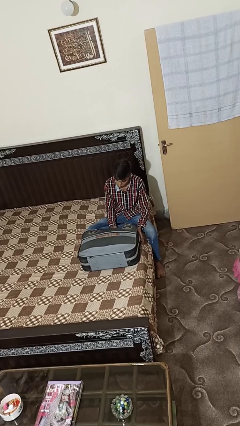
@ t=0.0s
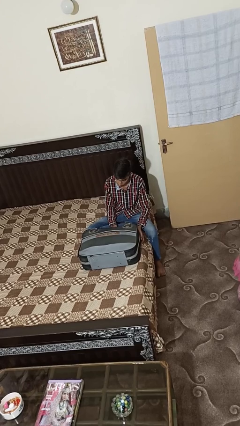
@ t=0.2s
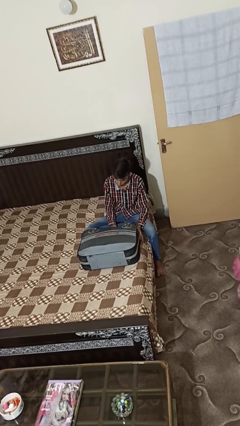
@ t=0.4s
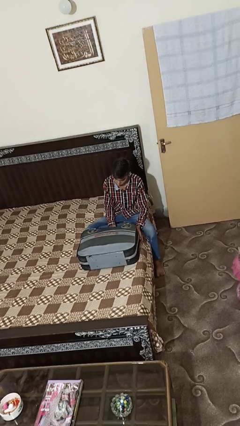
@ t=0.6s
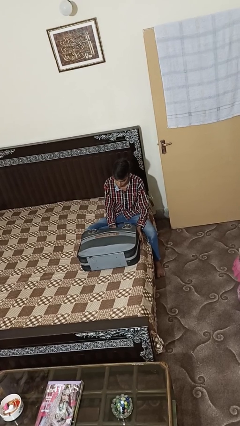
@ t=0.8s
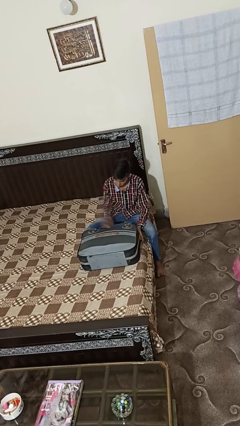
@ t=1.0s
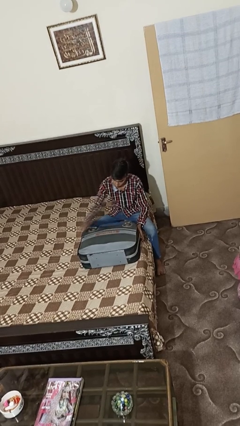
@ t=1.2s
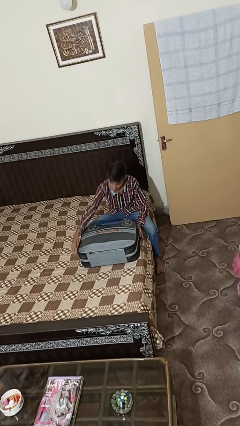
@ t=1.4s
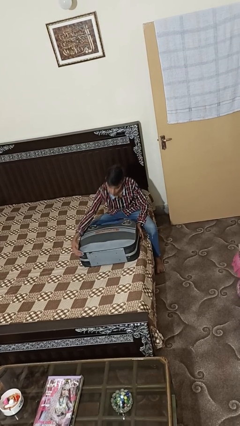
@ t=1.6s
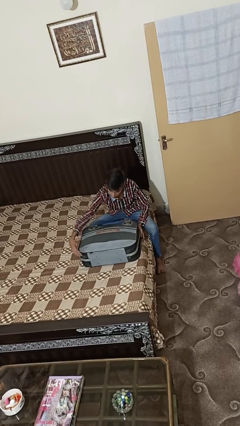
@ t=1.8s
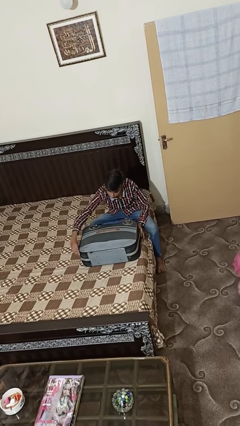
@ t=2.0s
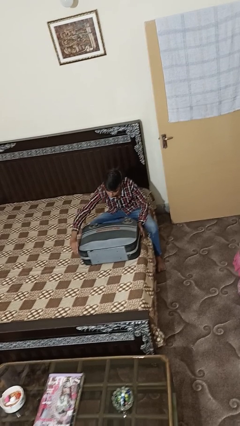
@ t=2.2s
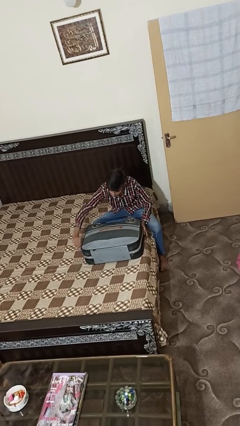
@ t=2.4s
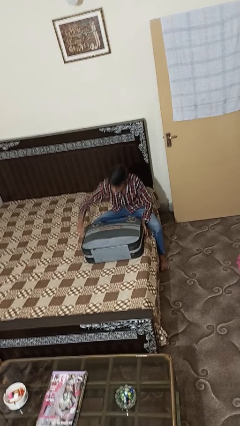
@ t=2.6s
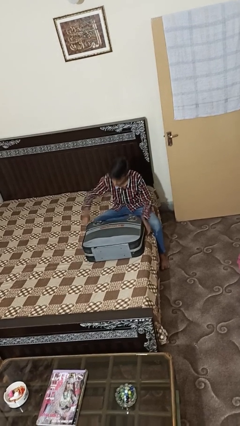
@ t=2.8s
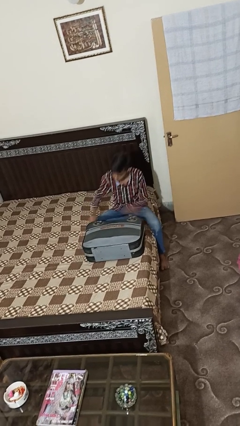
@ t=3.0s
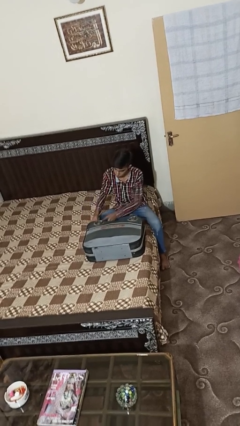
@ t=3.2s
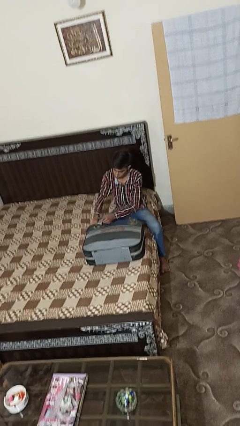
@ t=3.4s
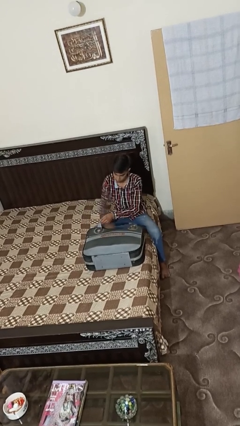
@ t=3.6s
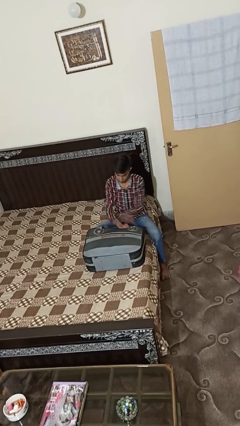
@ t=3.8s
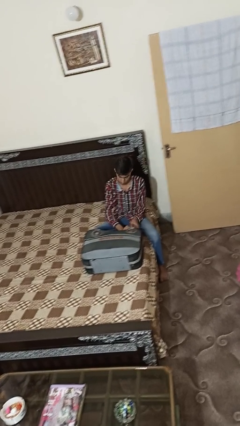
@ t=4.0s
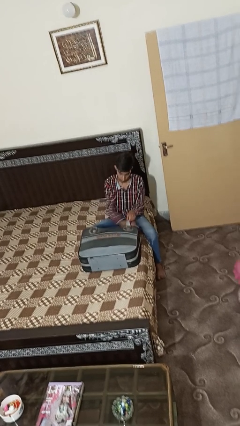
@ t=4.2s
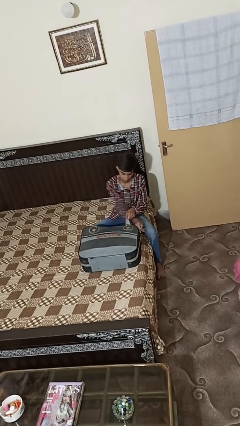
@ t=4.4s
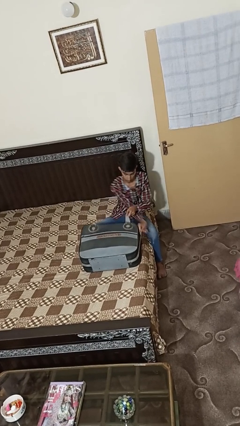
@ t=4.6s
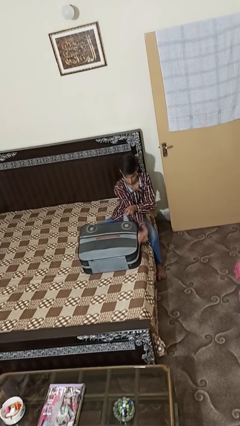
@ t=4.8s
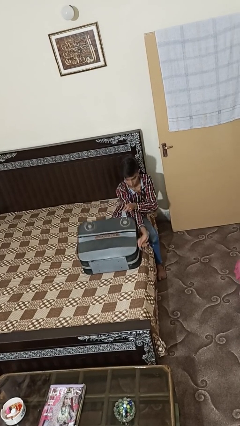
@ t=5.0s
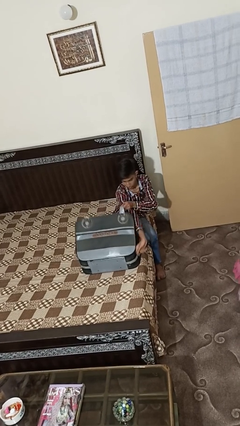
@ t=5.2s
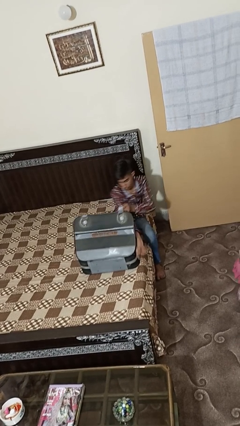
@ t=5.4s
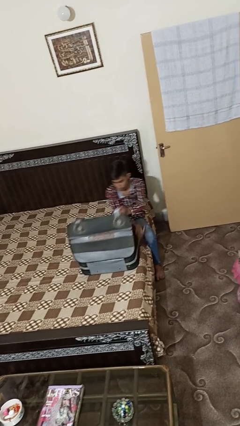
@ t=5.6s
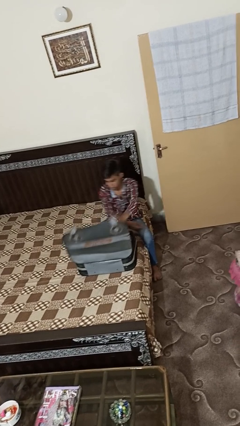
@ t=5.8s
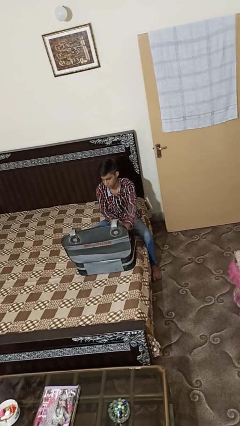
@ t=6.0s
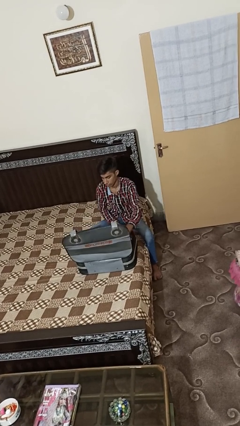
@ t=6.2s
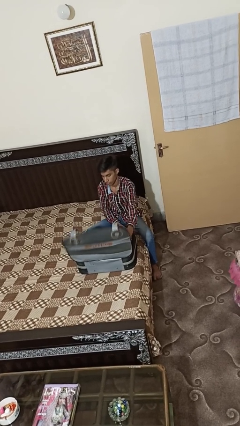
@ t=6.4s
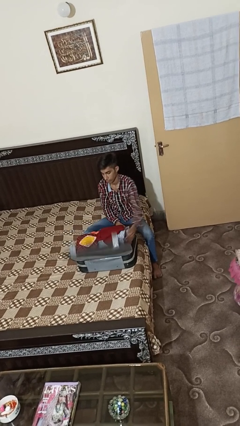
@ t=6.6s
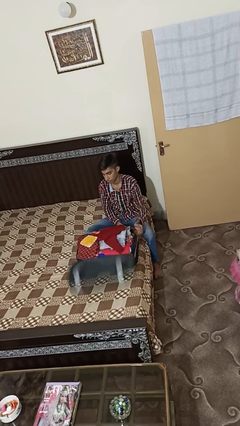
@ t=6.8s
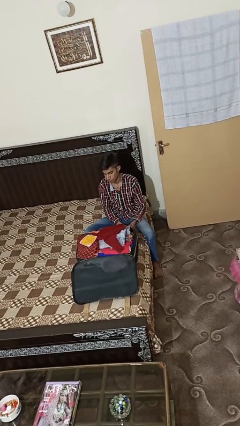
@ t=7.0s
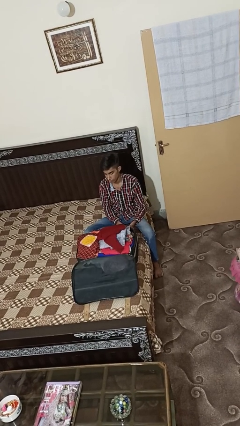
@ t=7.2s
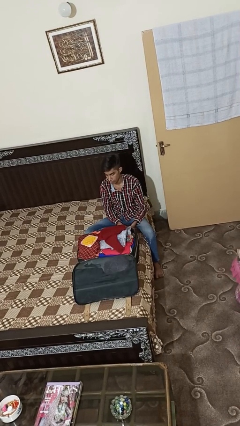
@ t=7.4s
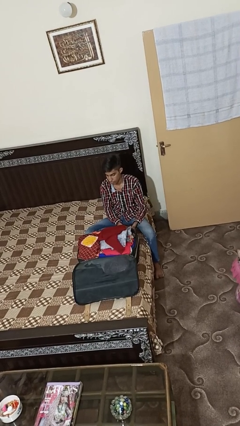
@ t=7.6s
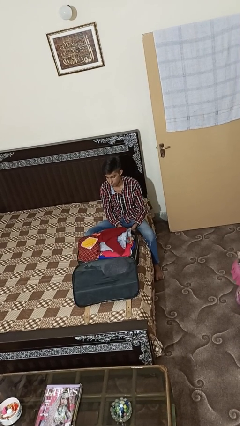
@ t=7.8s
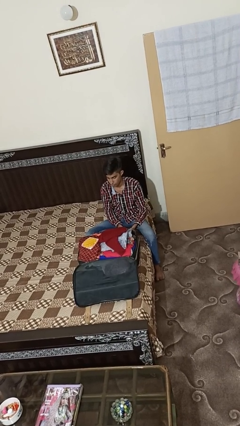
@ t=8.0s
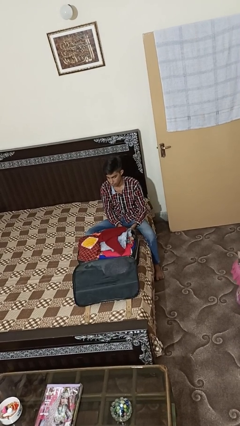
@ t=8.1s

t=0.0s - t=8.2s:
person opens suitcase

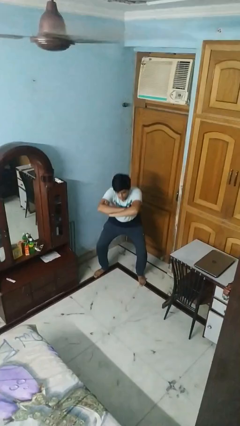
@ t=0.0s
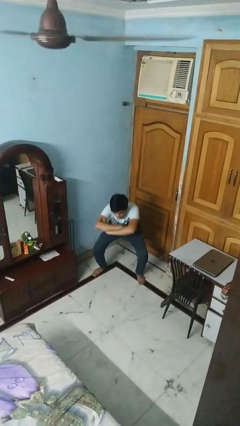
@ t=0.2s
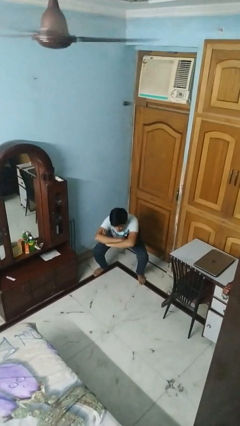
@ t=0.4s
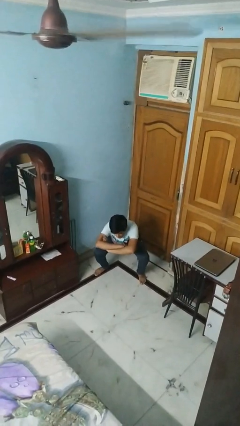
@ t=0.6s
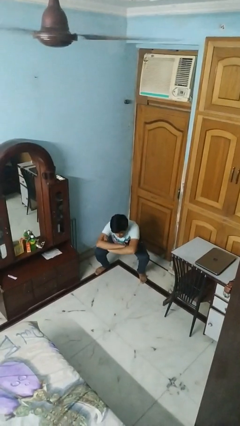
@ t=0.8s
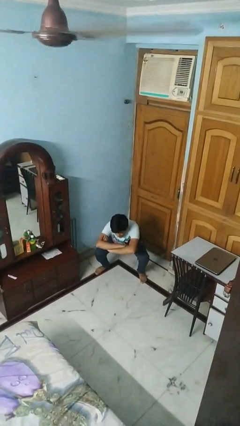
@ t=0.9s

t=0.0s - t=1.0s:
person squats

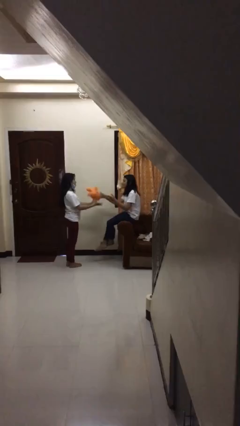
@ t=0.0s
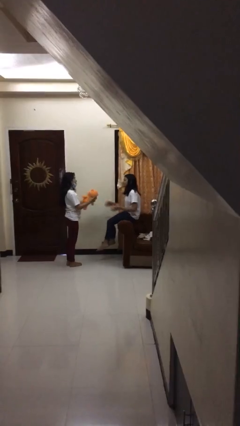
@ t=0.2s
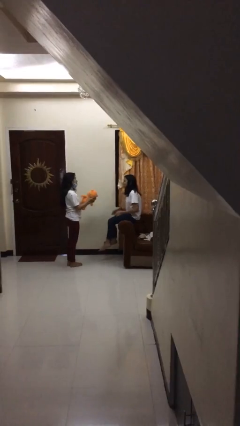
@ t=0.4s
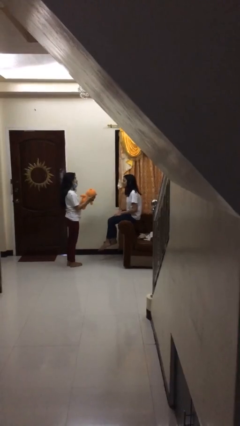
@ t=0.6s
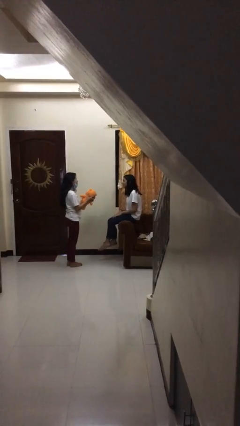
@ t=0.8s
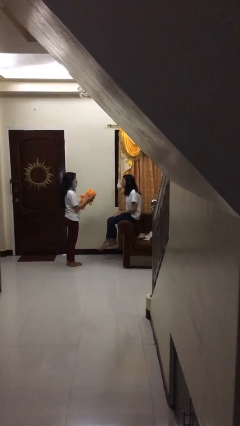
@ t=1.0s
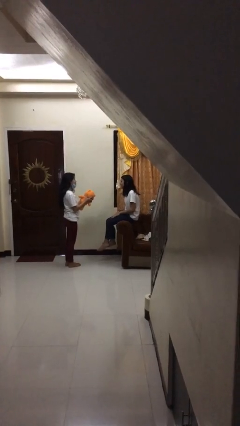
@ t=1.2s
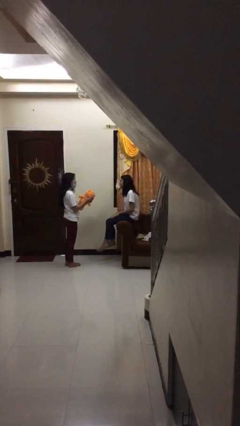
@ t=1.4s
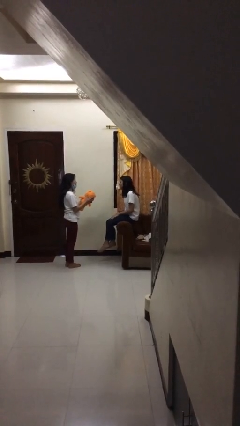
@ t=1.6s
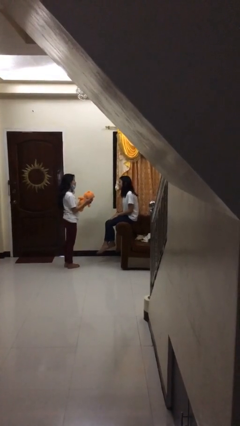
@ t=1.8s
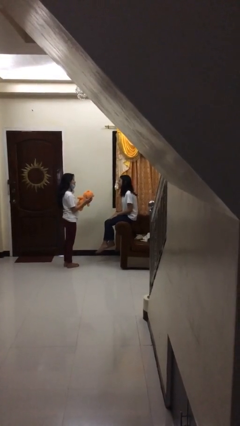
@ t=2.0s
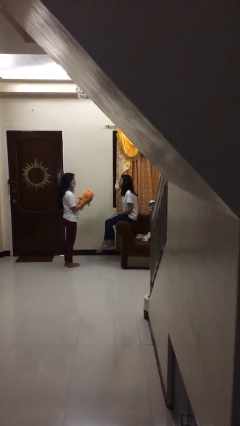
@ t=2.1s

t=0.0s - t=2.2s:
person transfers object to person

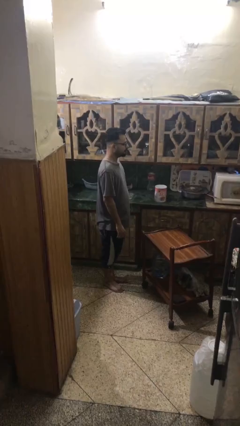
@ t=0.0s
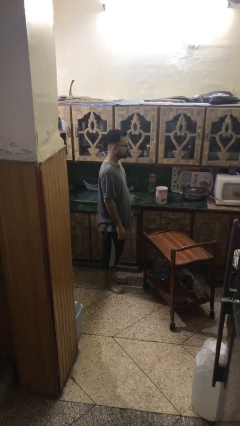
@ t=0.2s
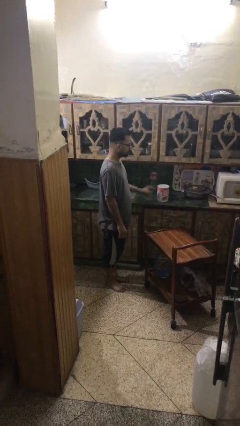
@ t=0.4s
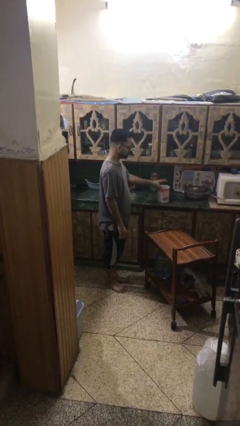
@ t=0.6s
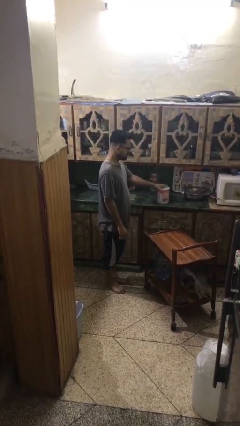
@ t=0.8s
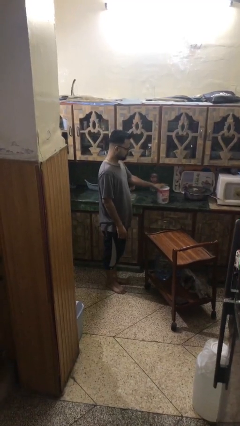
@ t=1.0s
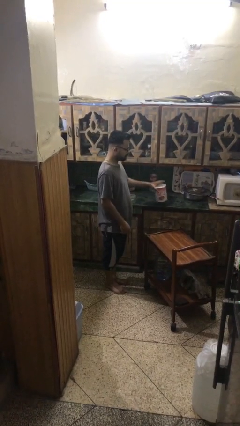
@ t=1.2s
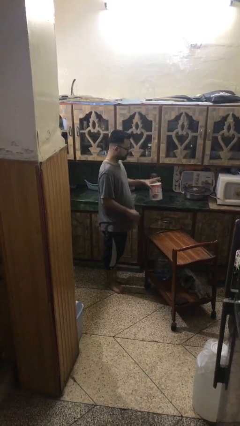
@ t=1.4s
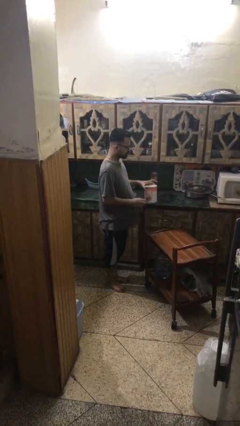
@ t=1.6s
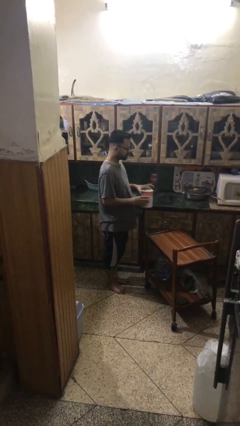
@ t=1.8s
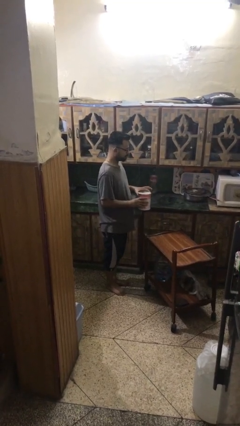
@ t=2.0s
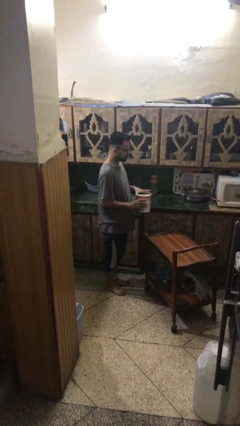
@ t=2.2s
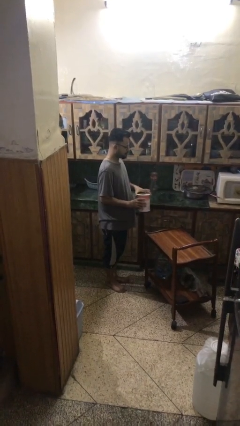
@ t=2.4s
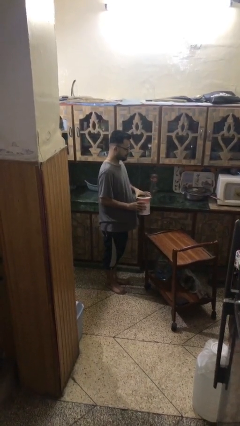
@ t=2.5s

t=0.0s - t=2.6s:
person picks up object from shelf

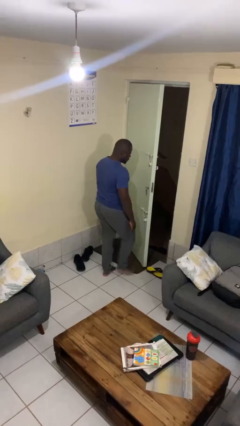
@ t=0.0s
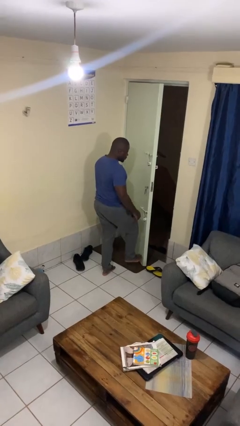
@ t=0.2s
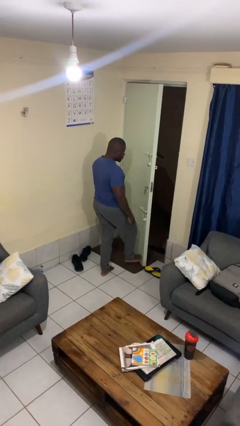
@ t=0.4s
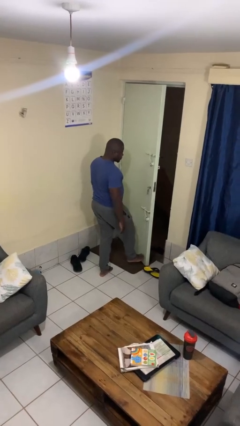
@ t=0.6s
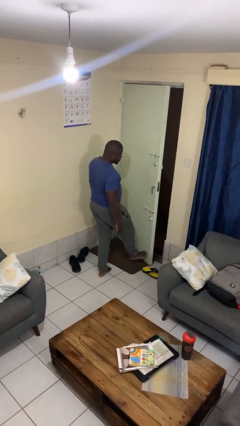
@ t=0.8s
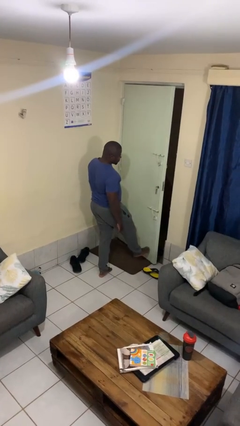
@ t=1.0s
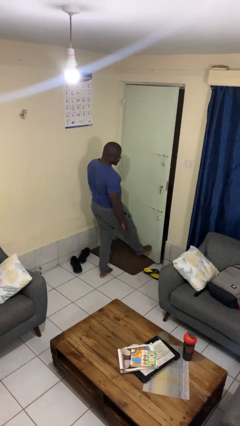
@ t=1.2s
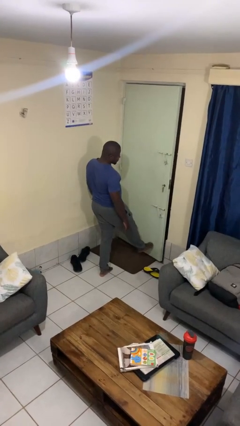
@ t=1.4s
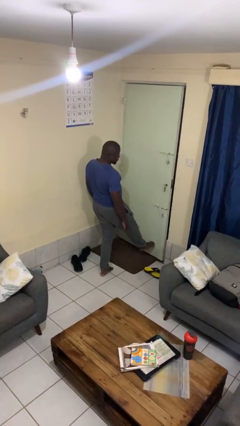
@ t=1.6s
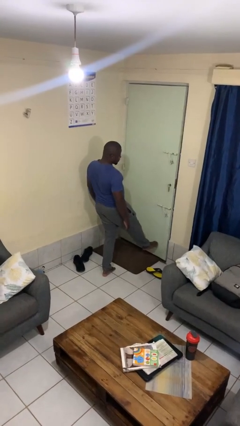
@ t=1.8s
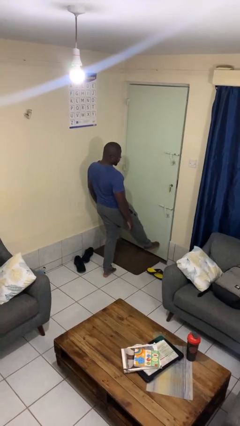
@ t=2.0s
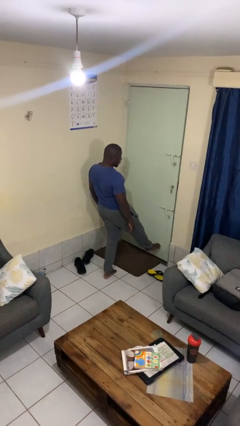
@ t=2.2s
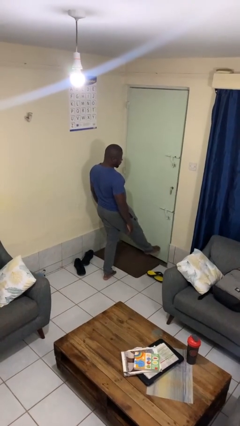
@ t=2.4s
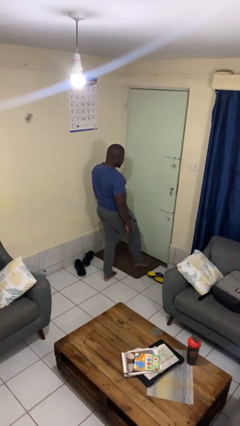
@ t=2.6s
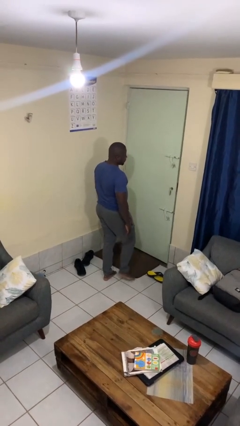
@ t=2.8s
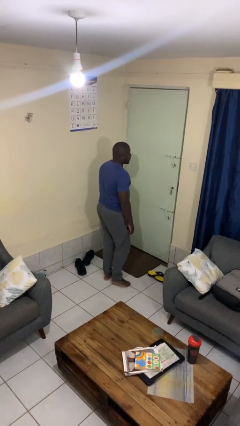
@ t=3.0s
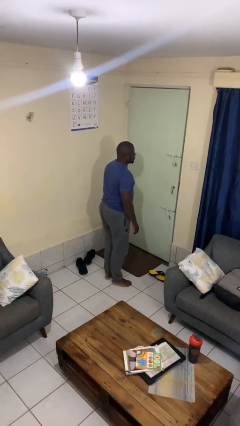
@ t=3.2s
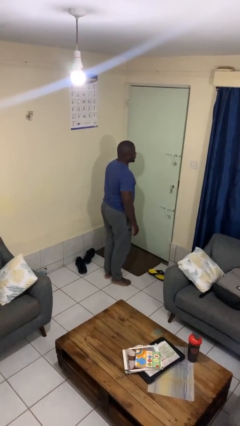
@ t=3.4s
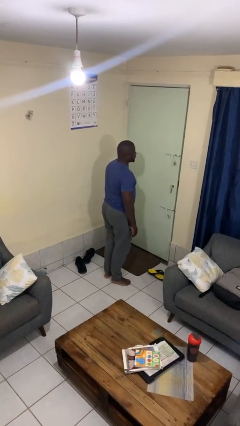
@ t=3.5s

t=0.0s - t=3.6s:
person closes door with foot
